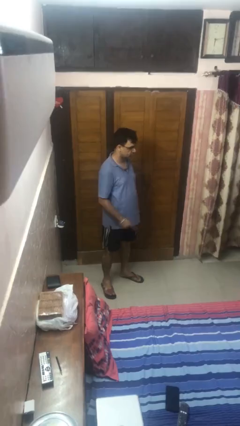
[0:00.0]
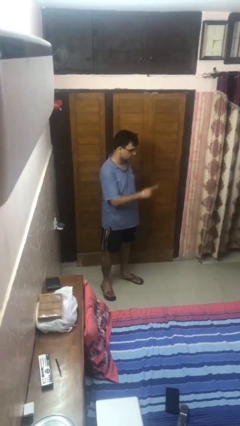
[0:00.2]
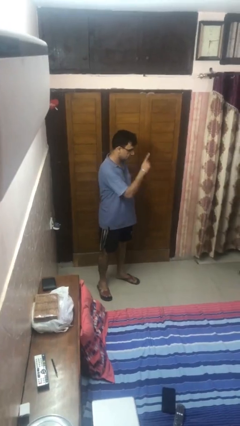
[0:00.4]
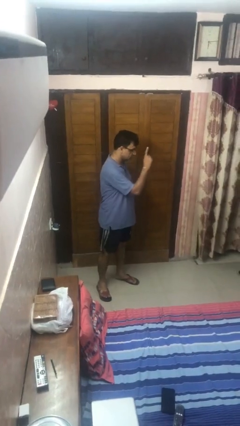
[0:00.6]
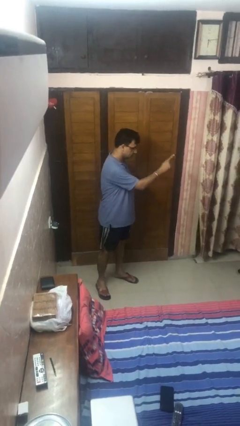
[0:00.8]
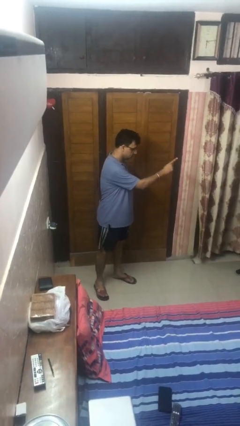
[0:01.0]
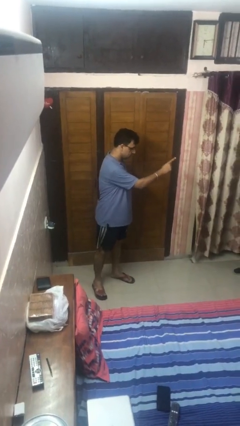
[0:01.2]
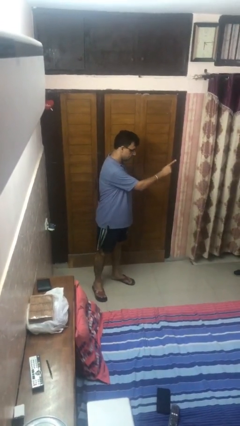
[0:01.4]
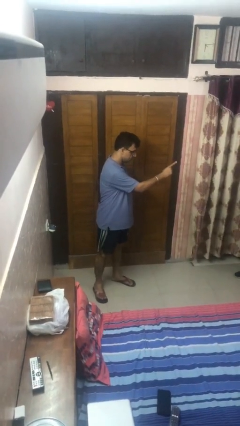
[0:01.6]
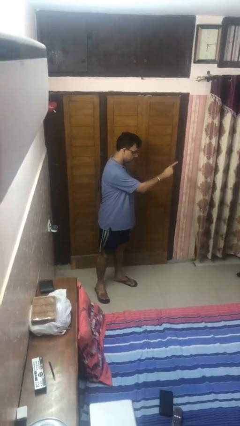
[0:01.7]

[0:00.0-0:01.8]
person points at person

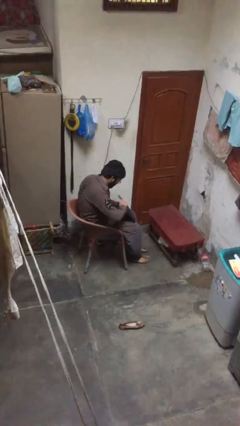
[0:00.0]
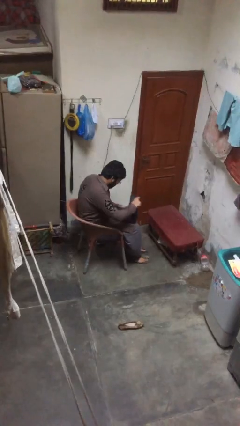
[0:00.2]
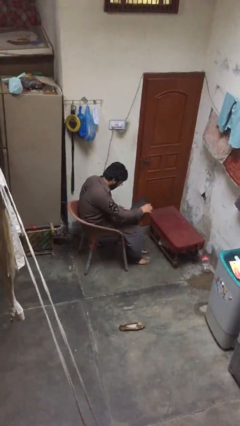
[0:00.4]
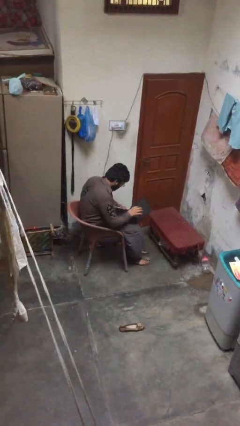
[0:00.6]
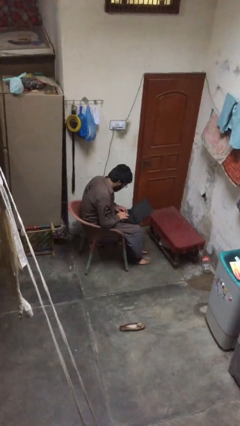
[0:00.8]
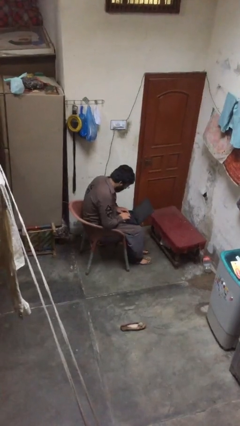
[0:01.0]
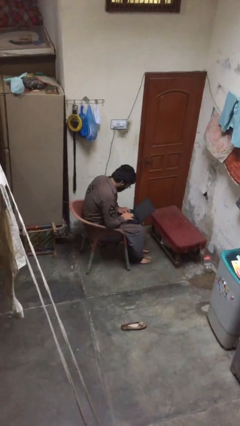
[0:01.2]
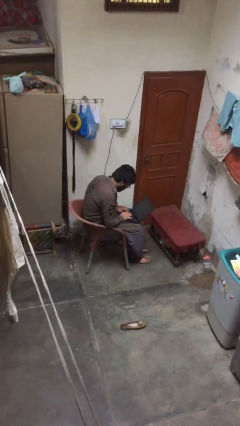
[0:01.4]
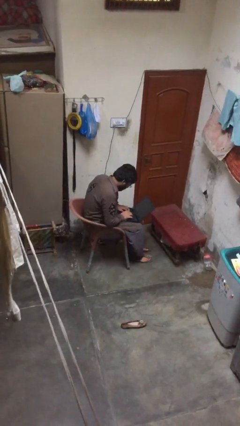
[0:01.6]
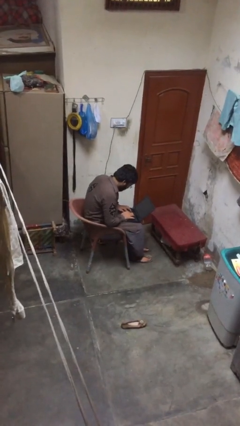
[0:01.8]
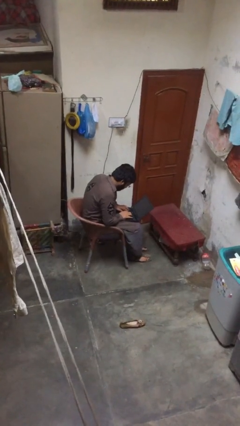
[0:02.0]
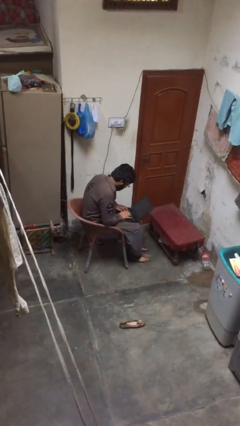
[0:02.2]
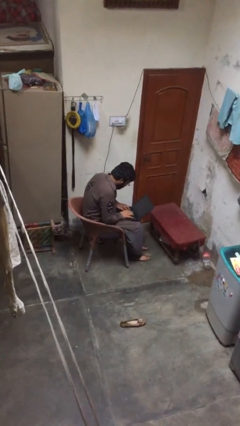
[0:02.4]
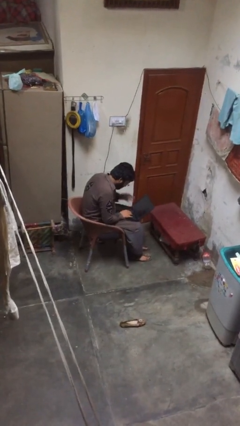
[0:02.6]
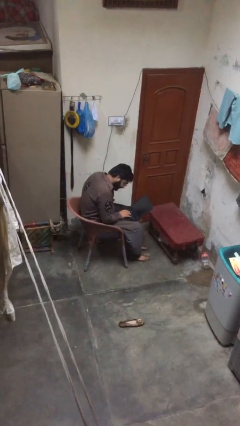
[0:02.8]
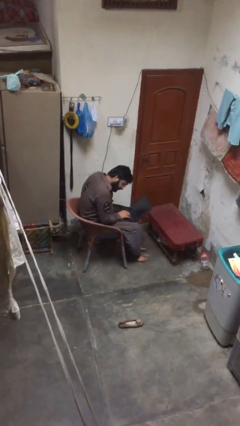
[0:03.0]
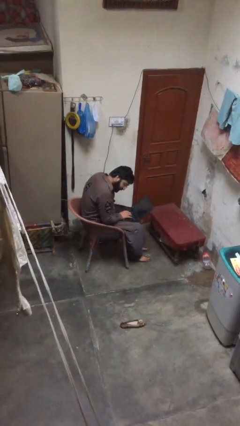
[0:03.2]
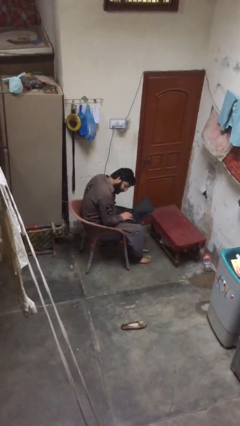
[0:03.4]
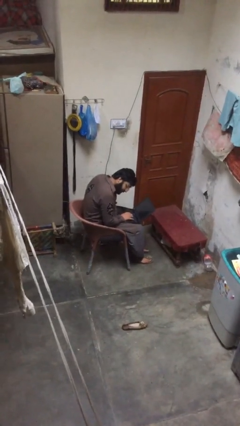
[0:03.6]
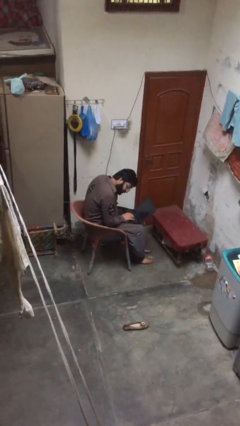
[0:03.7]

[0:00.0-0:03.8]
person interacts with laptop

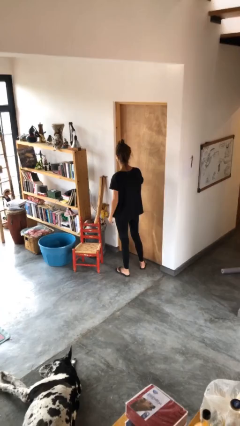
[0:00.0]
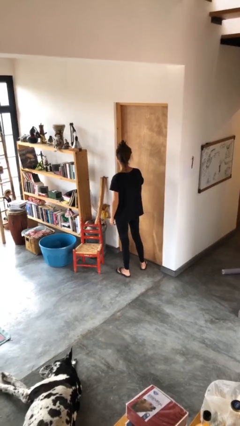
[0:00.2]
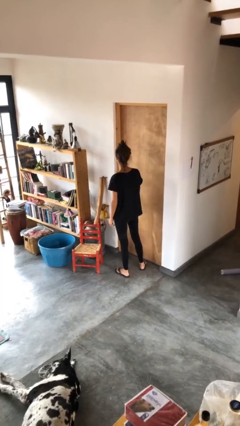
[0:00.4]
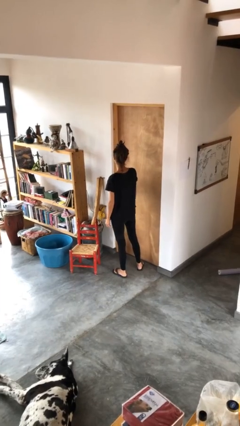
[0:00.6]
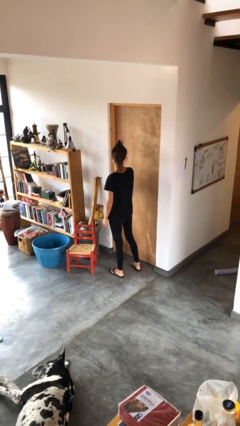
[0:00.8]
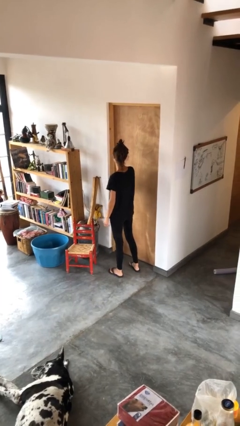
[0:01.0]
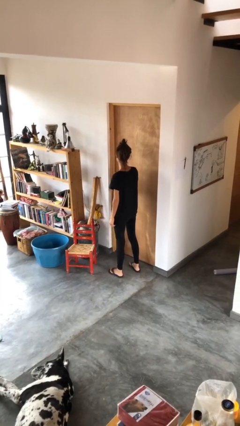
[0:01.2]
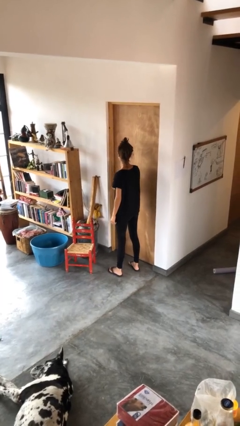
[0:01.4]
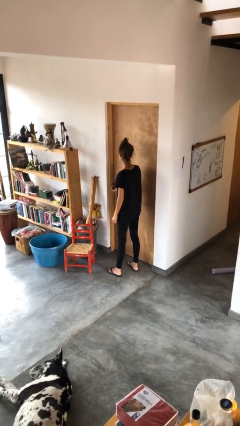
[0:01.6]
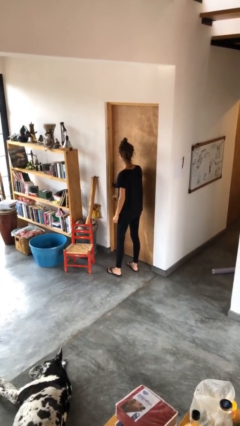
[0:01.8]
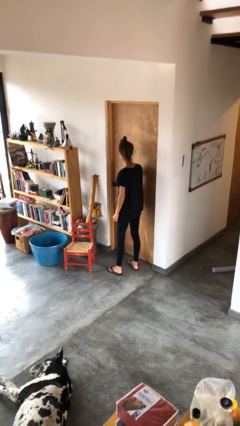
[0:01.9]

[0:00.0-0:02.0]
person unlocks door with keys

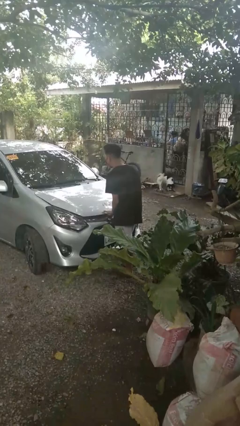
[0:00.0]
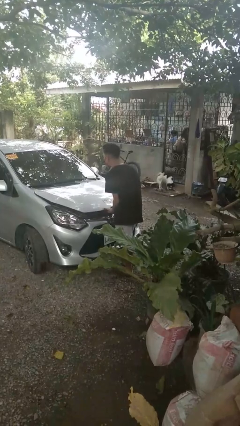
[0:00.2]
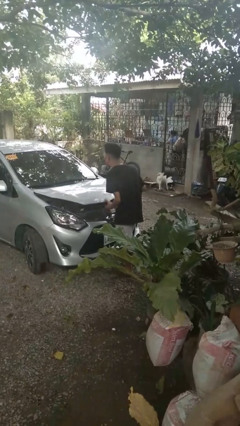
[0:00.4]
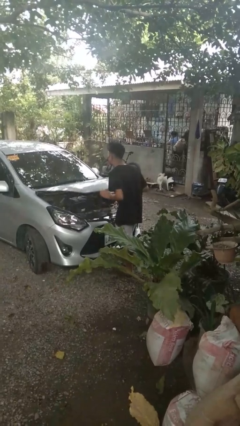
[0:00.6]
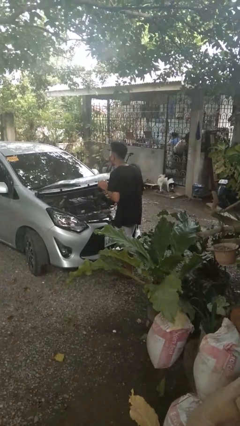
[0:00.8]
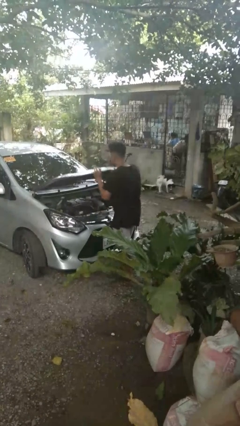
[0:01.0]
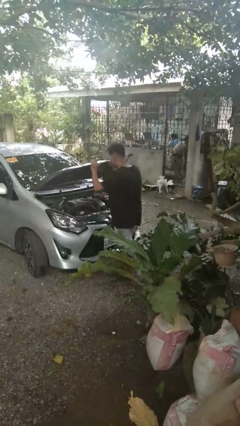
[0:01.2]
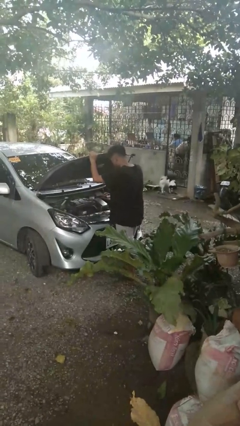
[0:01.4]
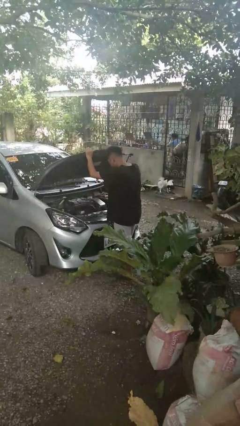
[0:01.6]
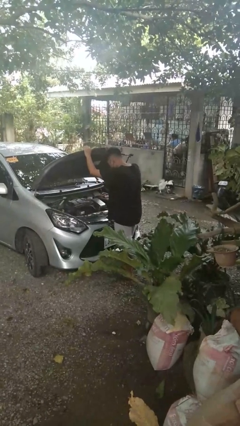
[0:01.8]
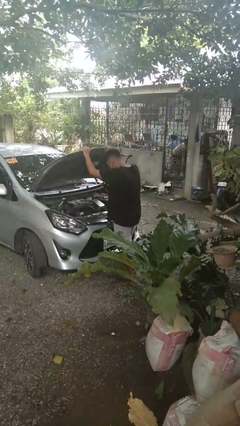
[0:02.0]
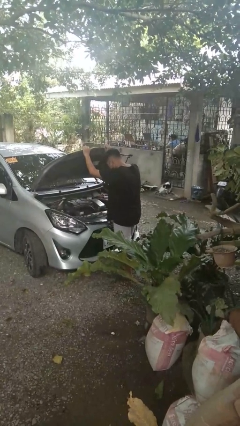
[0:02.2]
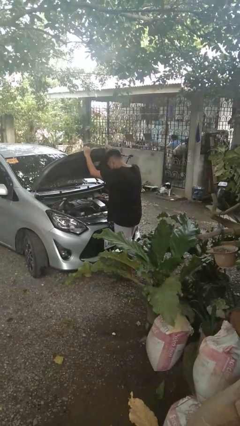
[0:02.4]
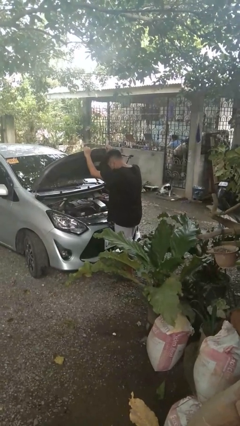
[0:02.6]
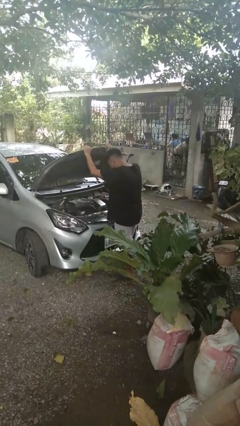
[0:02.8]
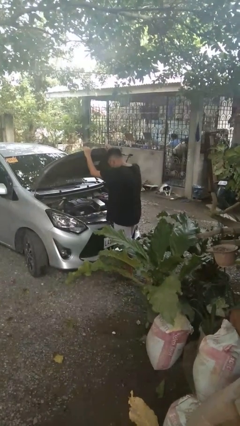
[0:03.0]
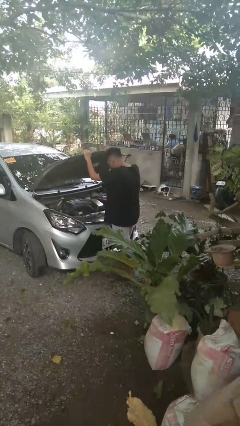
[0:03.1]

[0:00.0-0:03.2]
person opens car hood

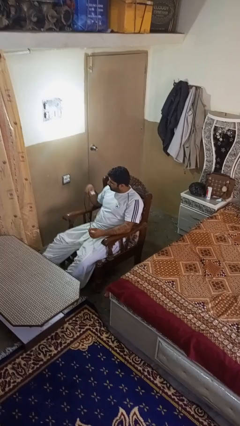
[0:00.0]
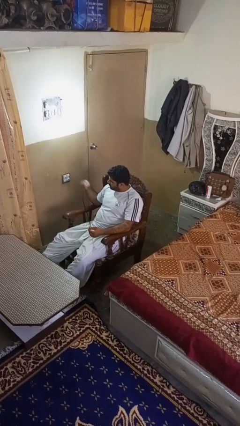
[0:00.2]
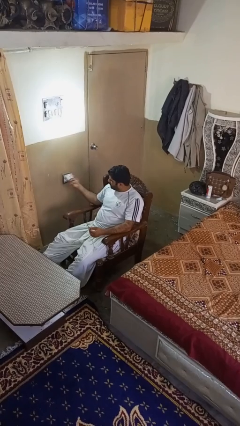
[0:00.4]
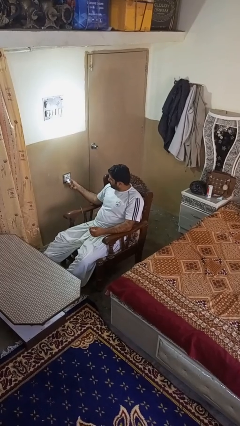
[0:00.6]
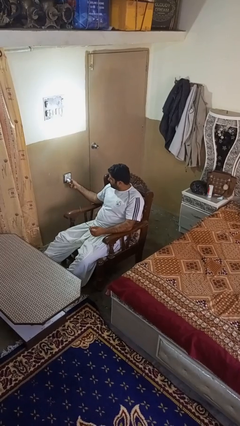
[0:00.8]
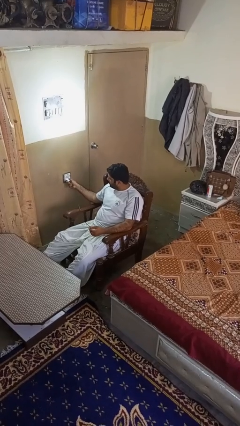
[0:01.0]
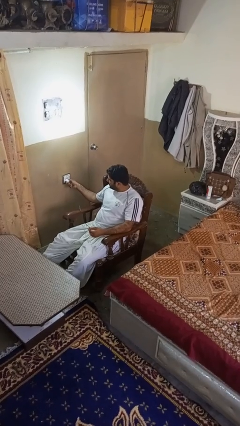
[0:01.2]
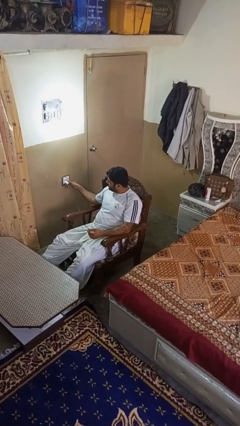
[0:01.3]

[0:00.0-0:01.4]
person plugs into electrical socket

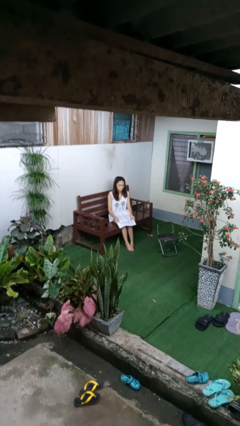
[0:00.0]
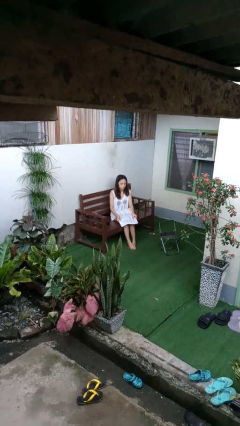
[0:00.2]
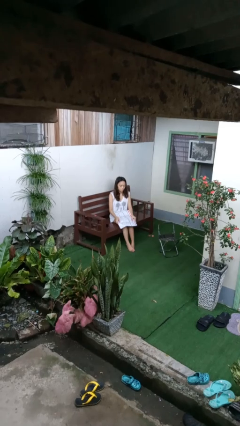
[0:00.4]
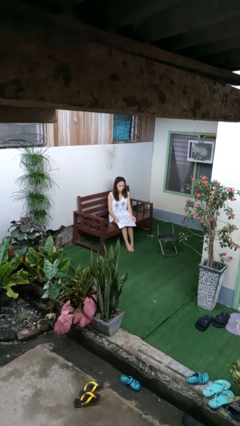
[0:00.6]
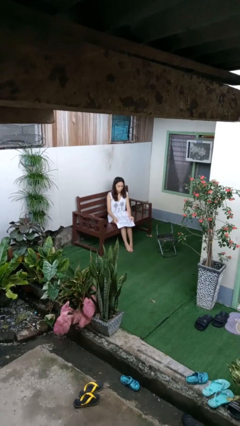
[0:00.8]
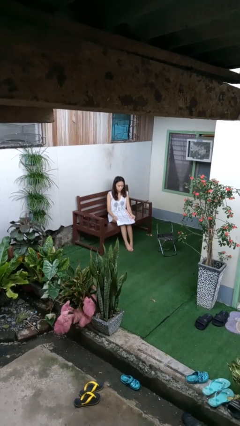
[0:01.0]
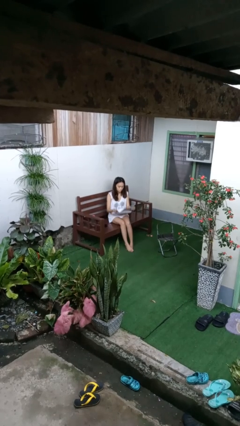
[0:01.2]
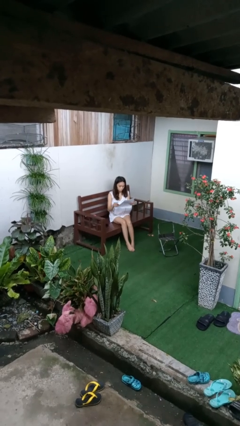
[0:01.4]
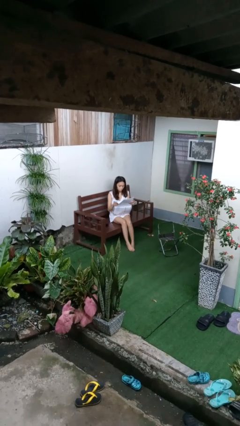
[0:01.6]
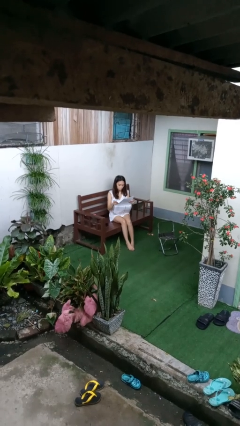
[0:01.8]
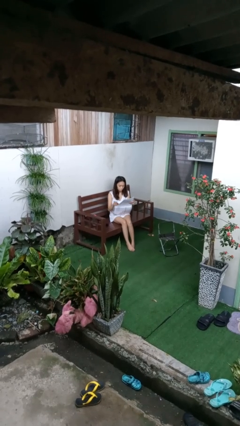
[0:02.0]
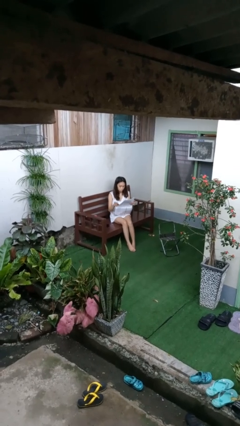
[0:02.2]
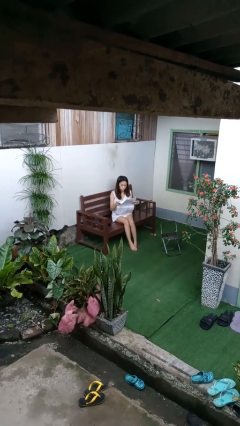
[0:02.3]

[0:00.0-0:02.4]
person reads newspaper

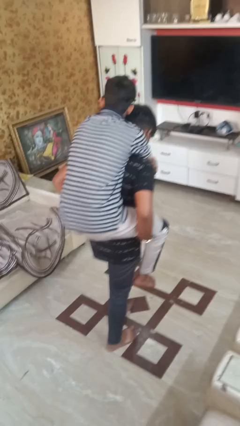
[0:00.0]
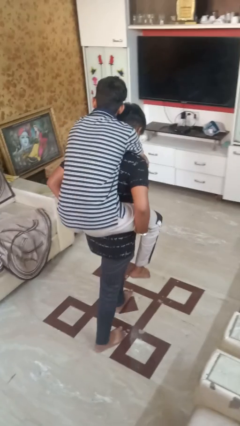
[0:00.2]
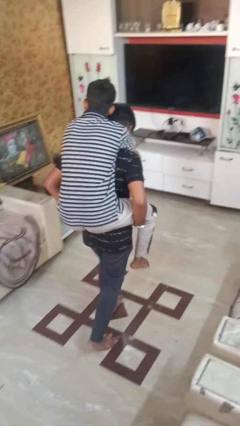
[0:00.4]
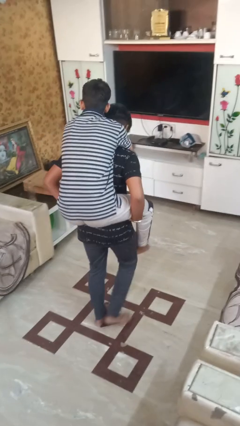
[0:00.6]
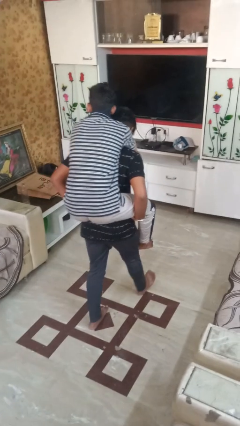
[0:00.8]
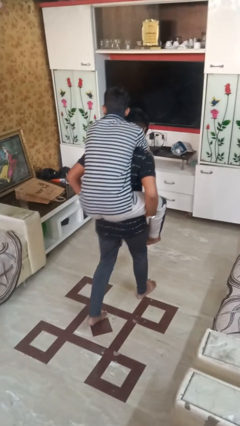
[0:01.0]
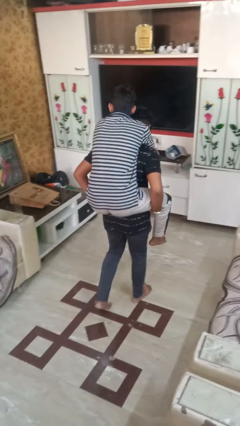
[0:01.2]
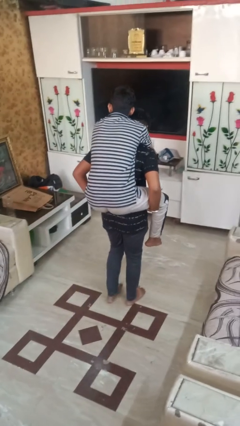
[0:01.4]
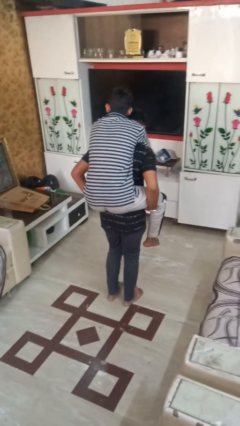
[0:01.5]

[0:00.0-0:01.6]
person carries person on back

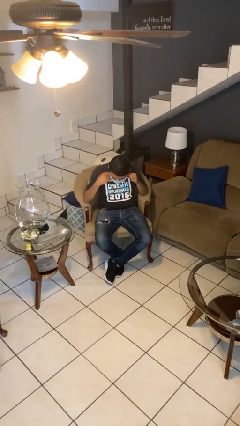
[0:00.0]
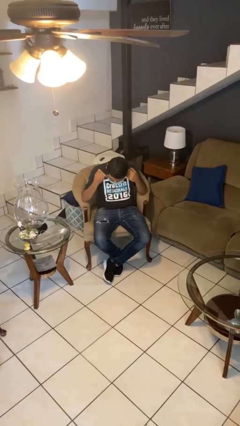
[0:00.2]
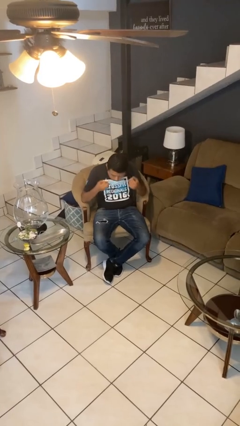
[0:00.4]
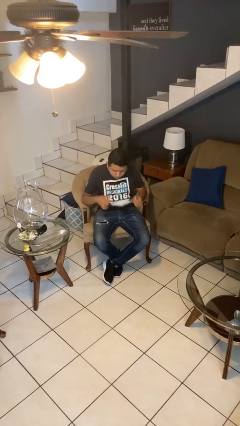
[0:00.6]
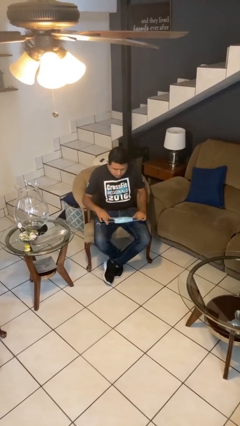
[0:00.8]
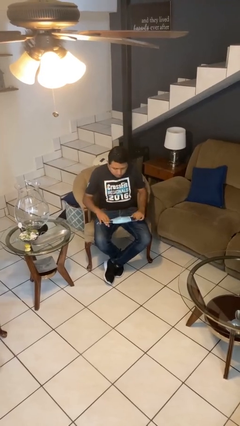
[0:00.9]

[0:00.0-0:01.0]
person takes off facemask
